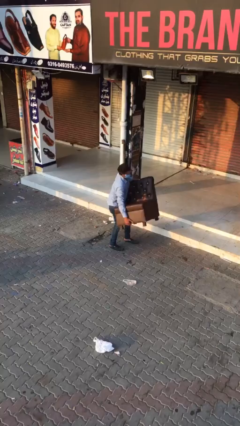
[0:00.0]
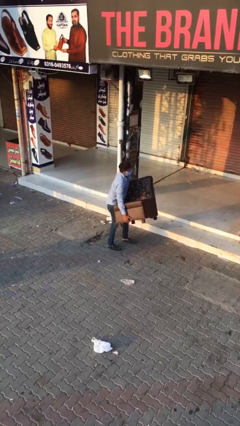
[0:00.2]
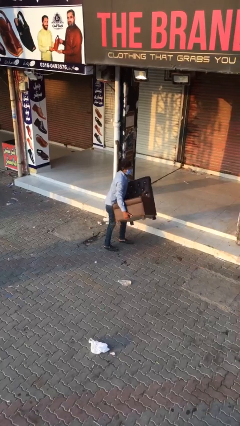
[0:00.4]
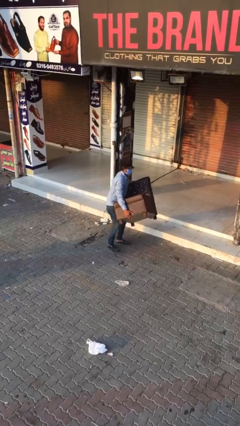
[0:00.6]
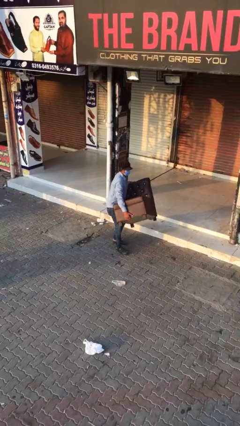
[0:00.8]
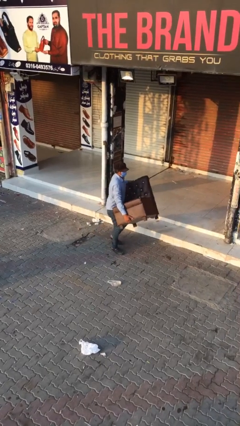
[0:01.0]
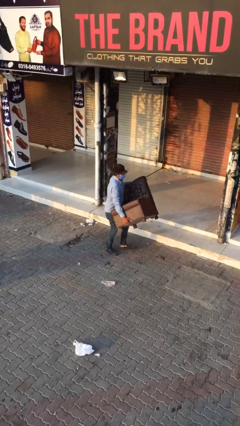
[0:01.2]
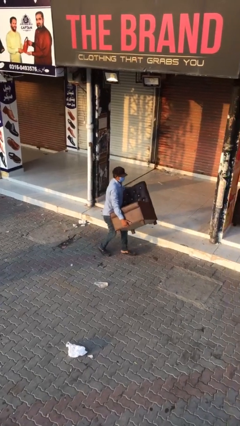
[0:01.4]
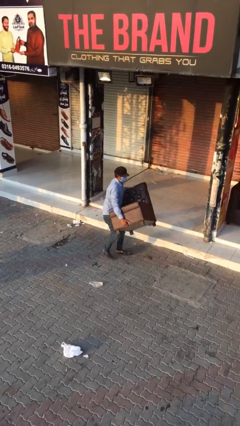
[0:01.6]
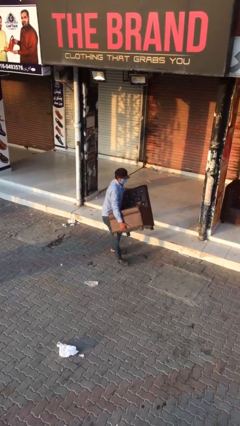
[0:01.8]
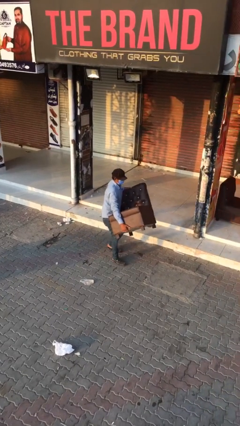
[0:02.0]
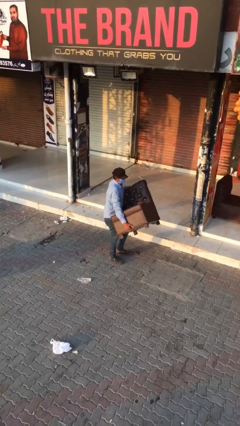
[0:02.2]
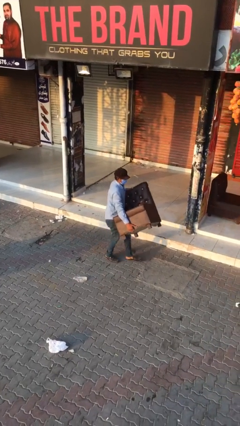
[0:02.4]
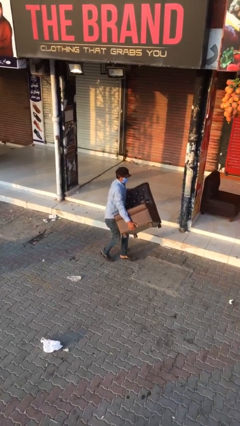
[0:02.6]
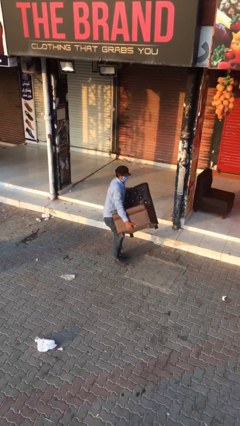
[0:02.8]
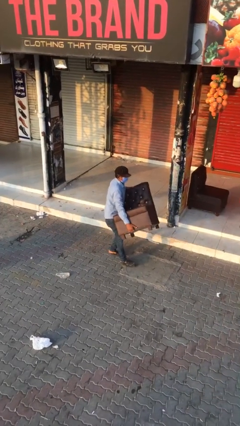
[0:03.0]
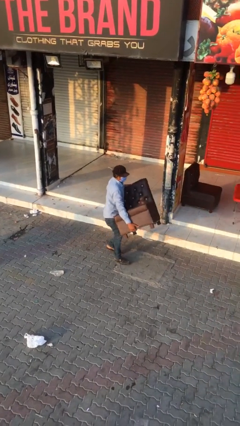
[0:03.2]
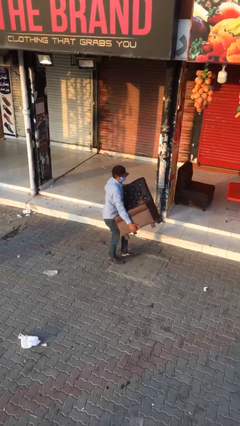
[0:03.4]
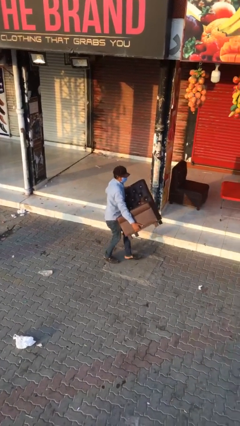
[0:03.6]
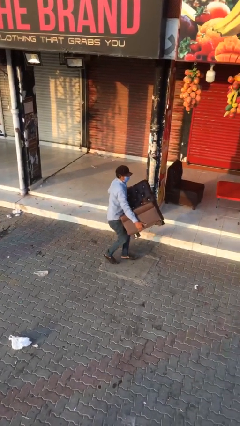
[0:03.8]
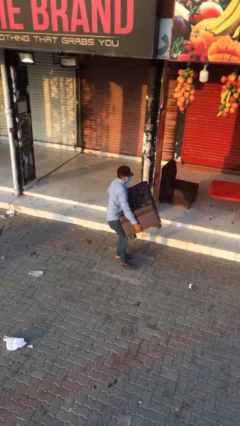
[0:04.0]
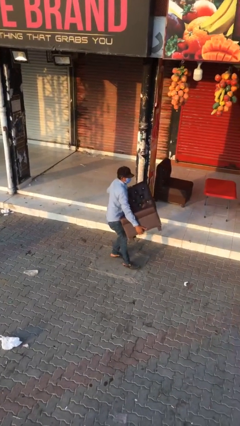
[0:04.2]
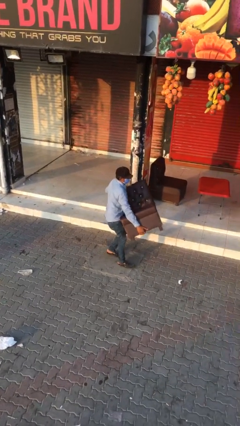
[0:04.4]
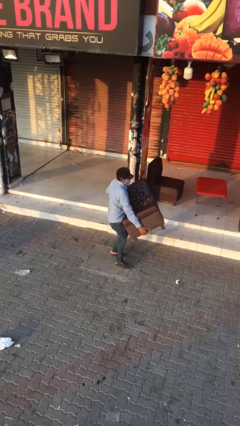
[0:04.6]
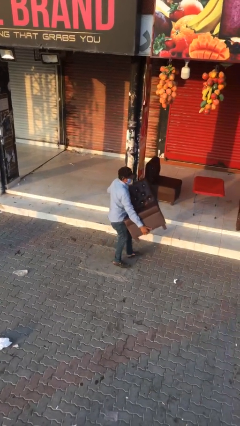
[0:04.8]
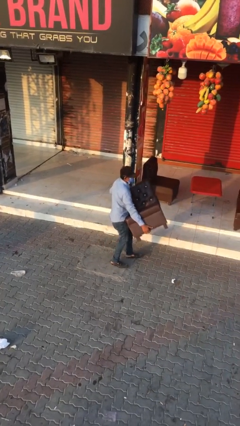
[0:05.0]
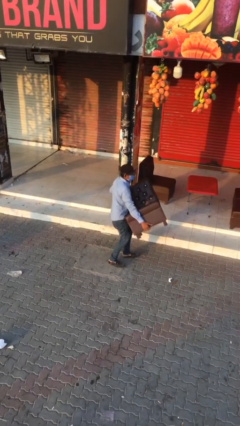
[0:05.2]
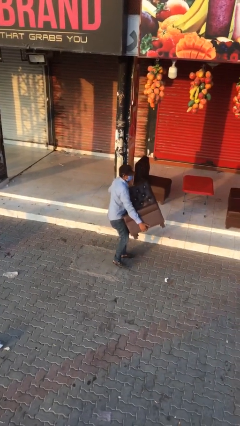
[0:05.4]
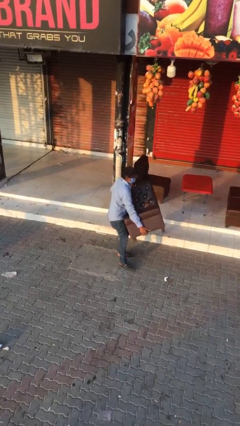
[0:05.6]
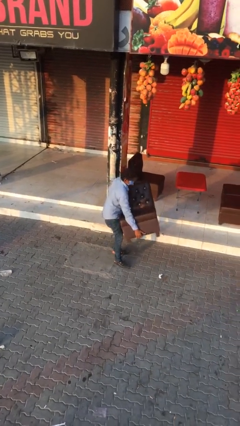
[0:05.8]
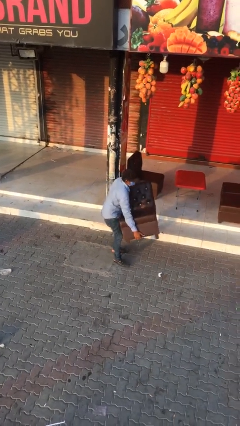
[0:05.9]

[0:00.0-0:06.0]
person carries heavy object

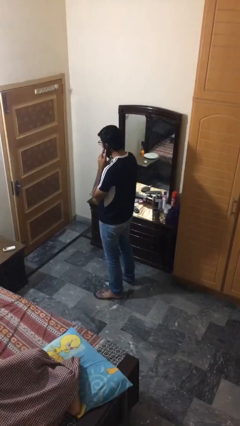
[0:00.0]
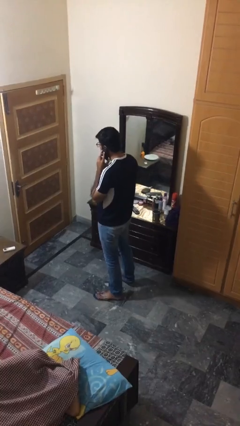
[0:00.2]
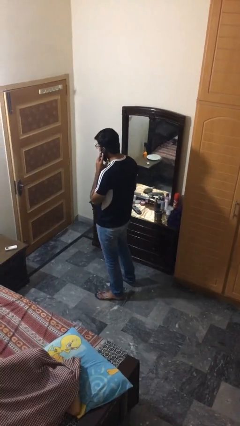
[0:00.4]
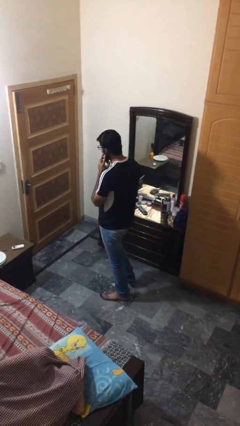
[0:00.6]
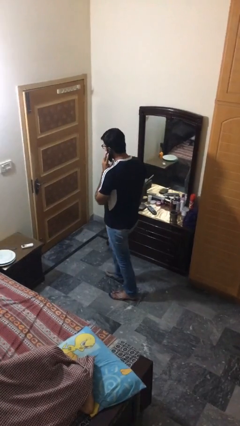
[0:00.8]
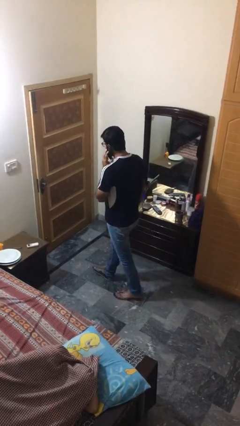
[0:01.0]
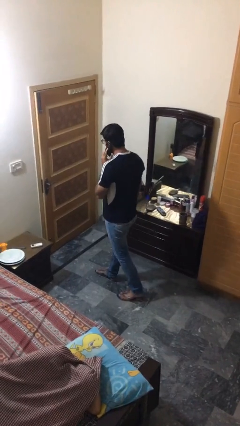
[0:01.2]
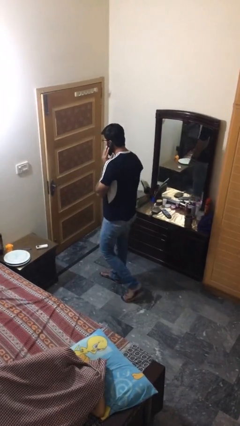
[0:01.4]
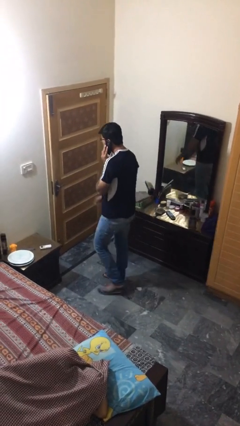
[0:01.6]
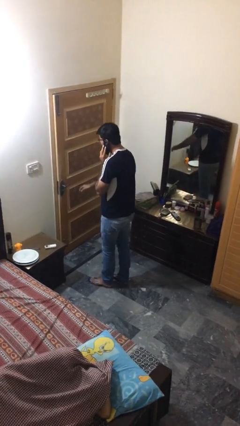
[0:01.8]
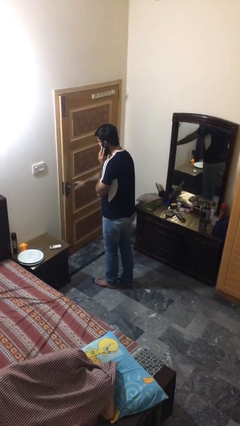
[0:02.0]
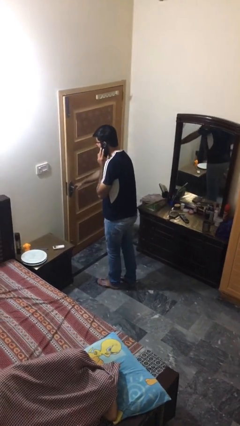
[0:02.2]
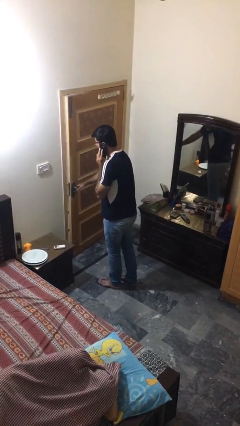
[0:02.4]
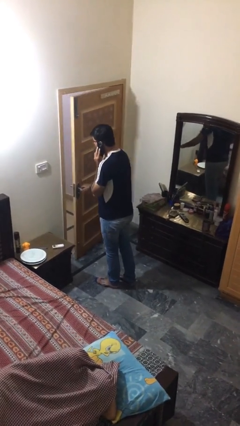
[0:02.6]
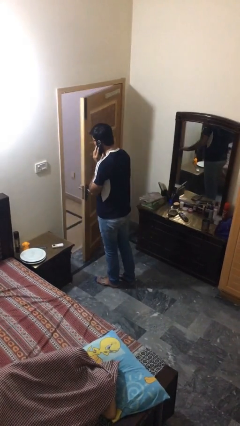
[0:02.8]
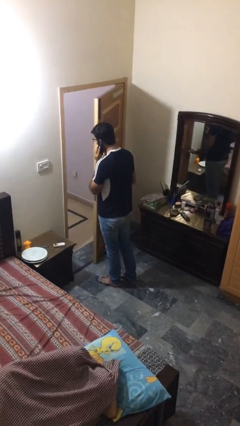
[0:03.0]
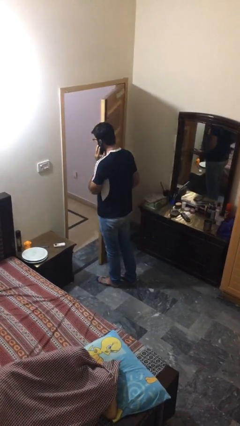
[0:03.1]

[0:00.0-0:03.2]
person opens facility door

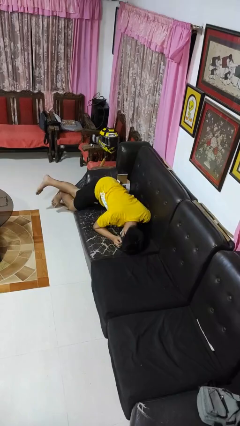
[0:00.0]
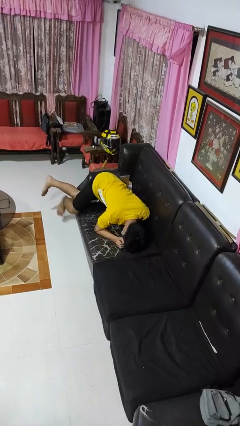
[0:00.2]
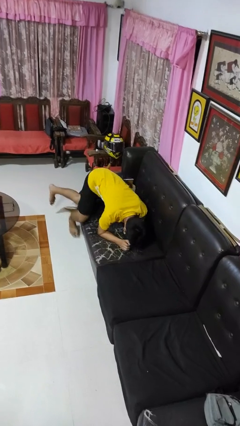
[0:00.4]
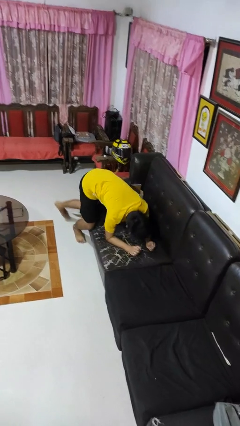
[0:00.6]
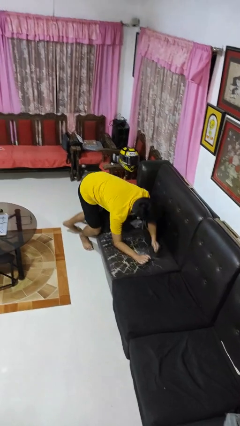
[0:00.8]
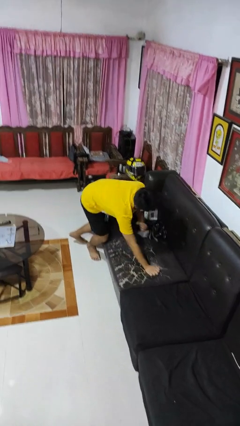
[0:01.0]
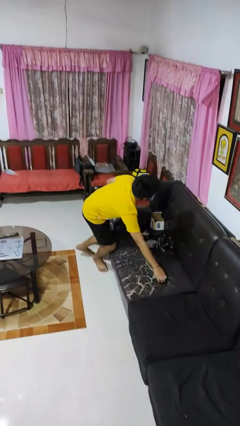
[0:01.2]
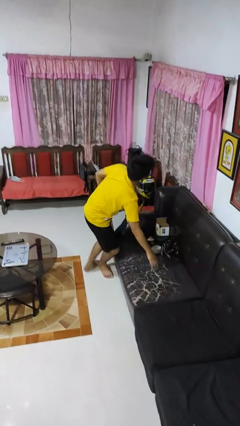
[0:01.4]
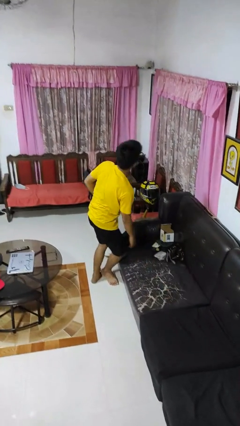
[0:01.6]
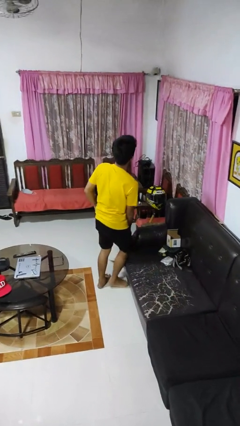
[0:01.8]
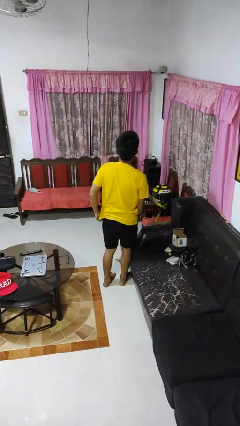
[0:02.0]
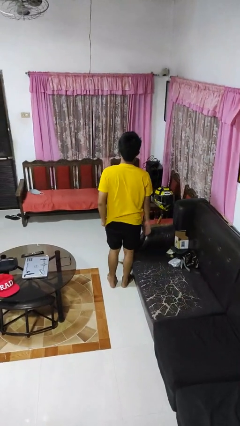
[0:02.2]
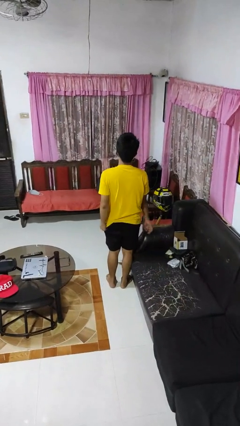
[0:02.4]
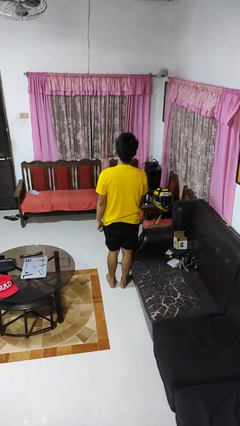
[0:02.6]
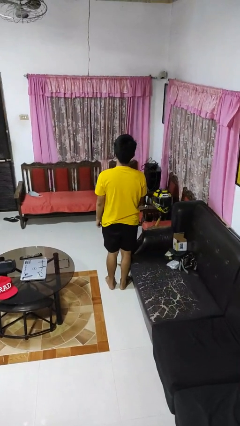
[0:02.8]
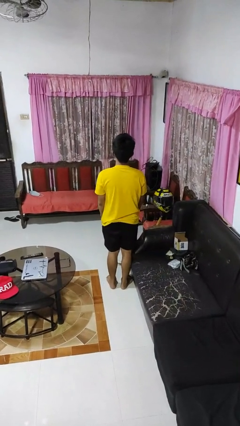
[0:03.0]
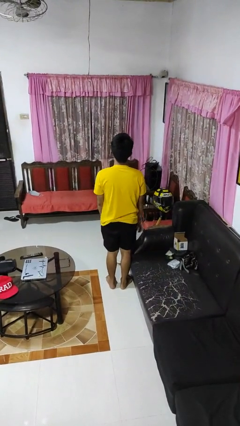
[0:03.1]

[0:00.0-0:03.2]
person stands up

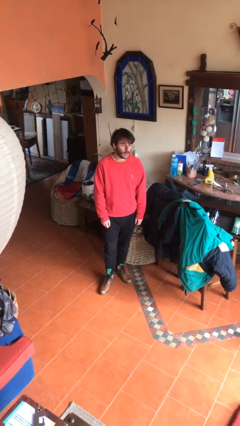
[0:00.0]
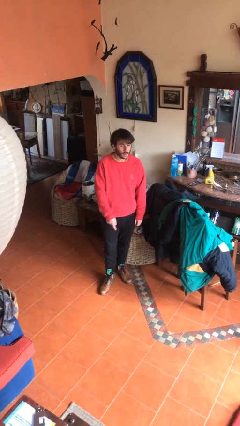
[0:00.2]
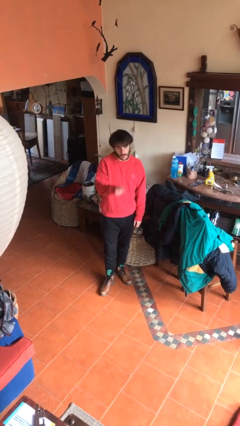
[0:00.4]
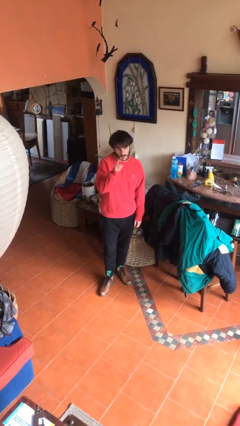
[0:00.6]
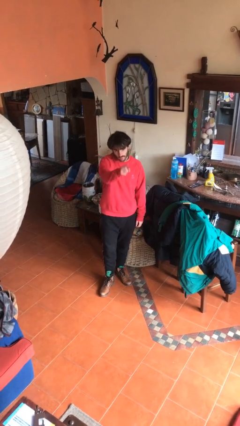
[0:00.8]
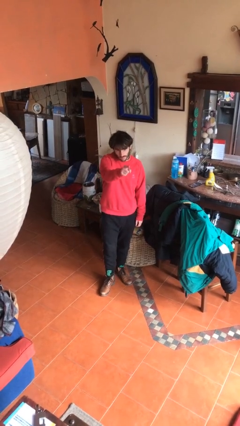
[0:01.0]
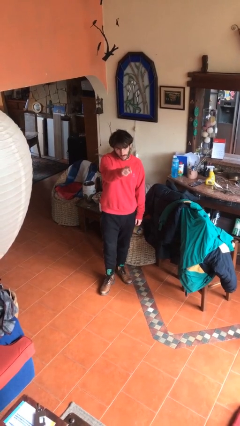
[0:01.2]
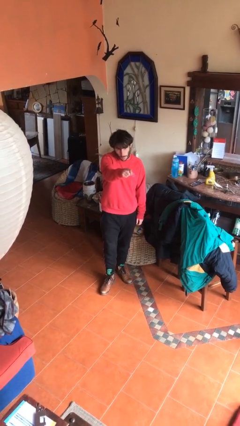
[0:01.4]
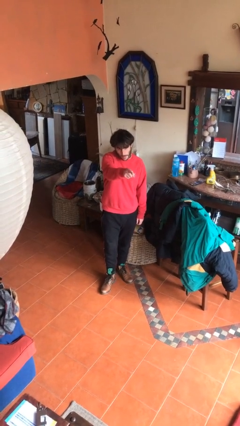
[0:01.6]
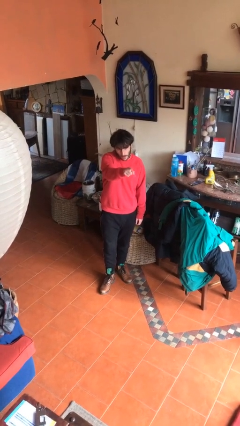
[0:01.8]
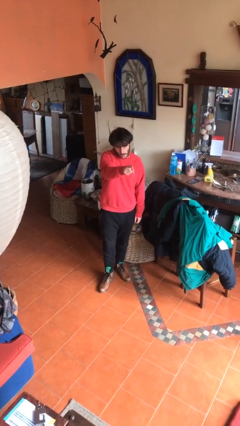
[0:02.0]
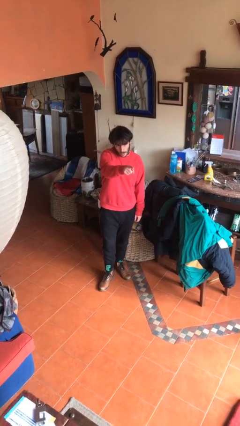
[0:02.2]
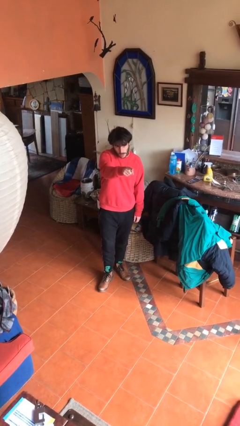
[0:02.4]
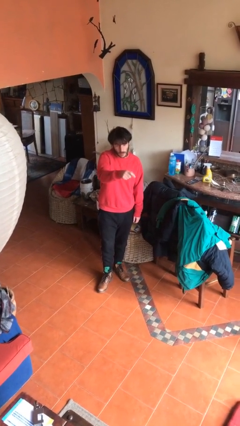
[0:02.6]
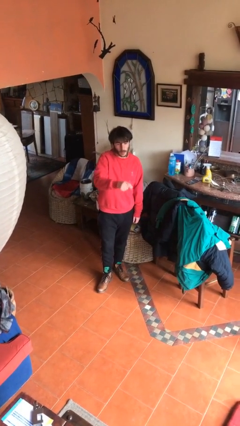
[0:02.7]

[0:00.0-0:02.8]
person points at person

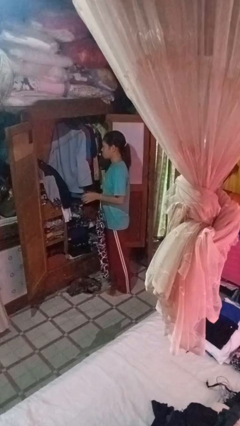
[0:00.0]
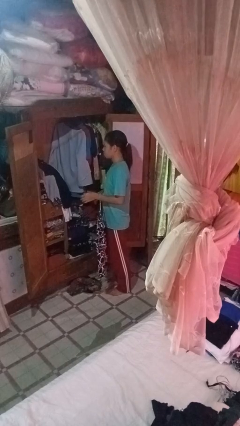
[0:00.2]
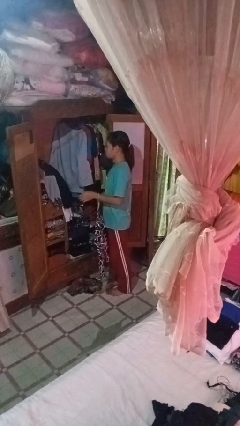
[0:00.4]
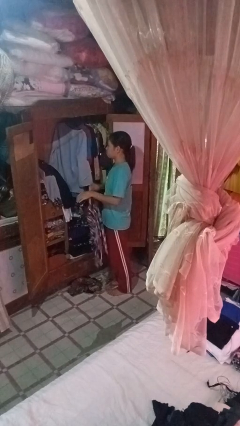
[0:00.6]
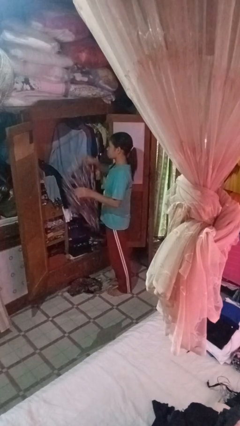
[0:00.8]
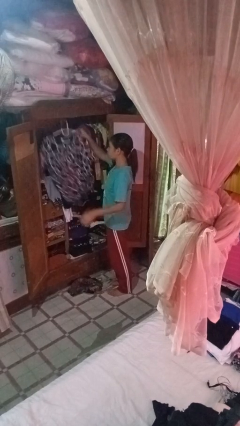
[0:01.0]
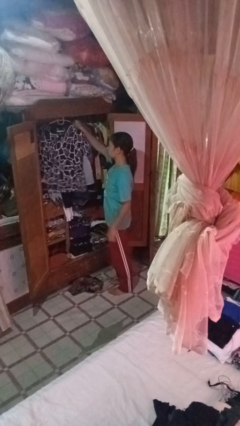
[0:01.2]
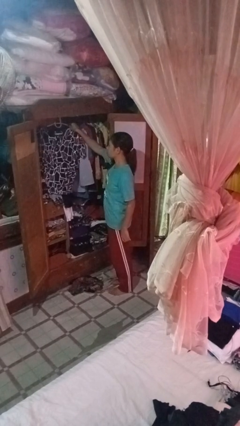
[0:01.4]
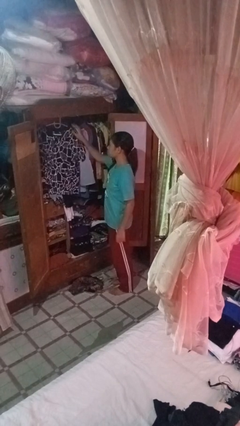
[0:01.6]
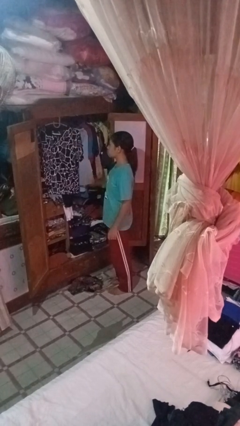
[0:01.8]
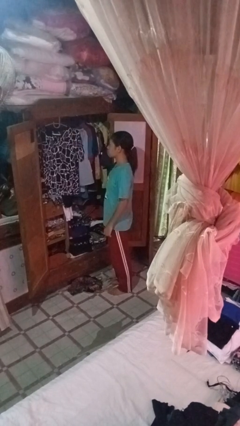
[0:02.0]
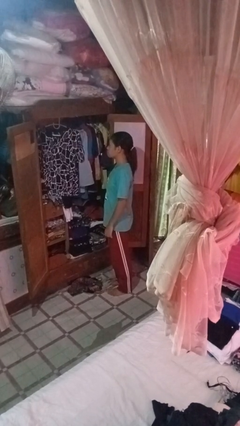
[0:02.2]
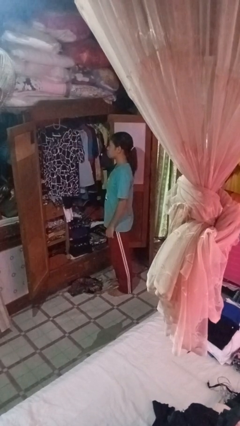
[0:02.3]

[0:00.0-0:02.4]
person puts clothes into closet
